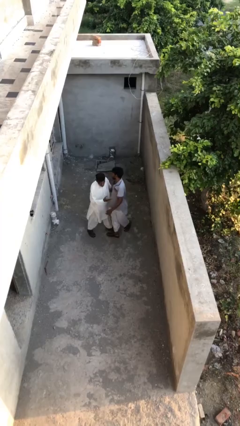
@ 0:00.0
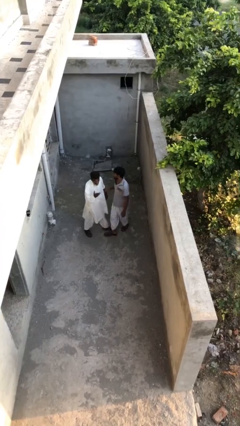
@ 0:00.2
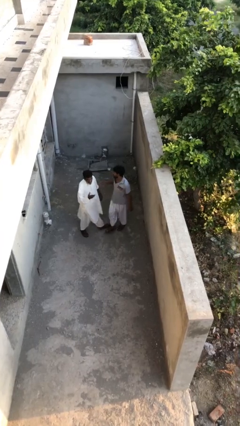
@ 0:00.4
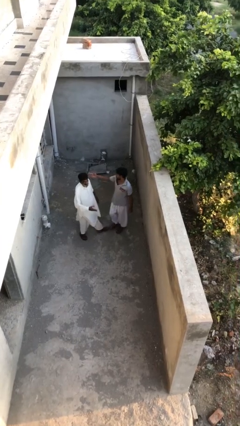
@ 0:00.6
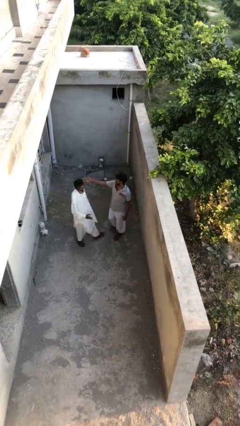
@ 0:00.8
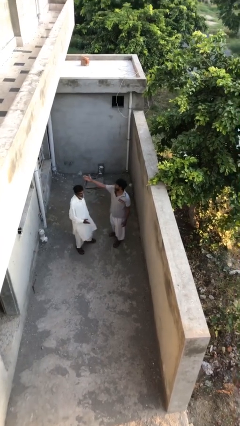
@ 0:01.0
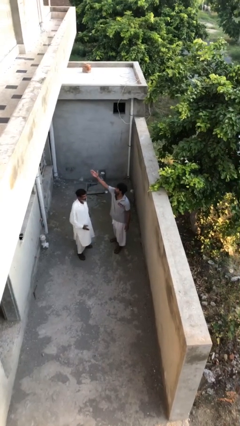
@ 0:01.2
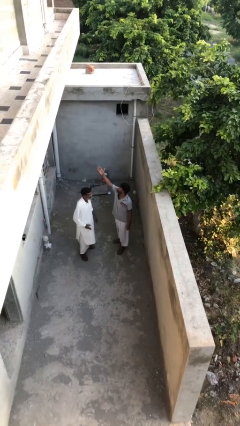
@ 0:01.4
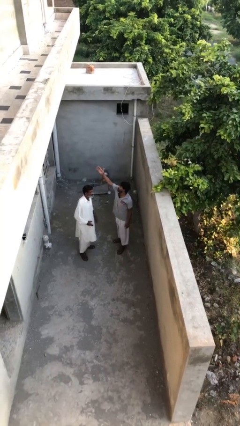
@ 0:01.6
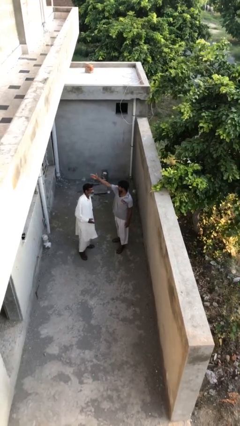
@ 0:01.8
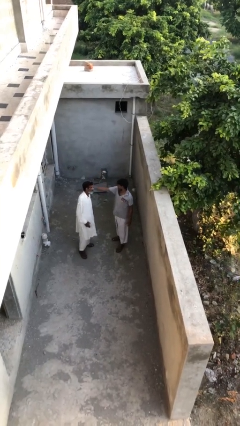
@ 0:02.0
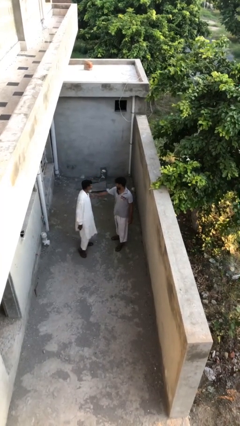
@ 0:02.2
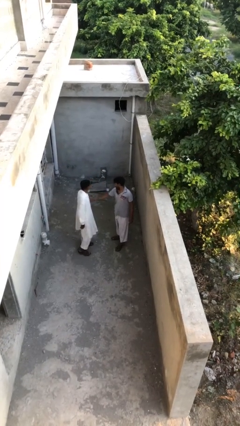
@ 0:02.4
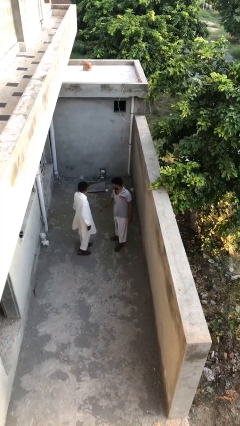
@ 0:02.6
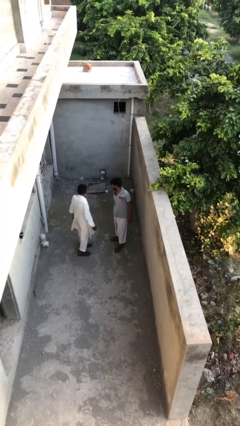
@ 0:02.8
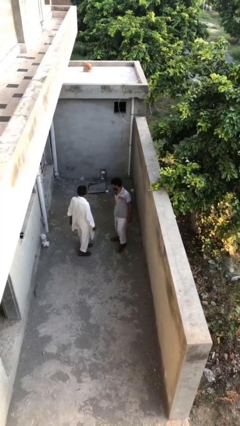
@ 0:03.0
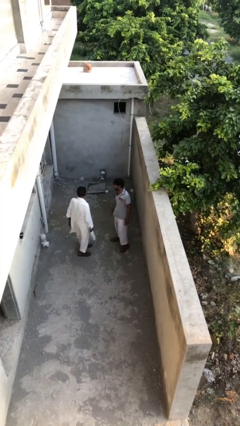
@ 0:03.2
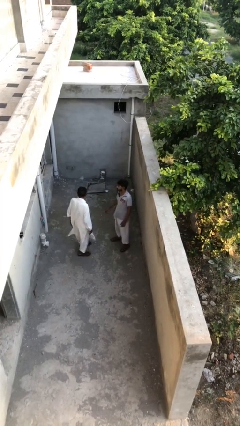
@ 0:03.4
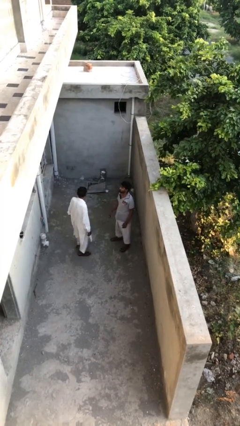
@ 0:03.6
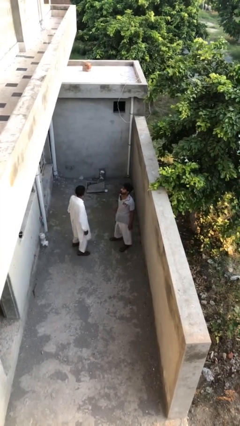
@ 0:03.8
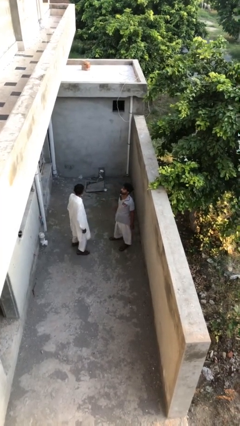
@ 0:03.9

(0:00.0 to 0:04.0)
person talks to person

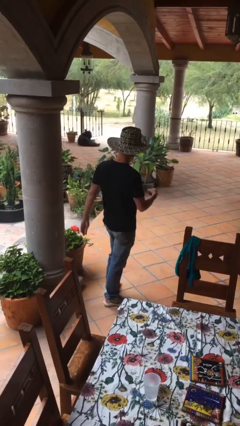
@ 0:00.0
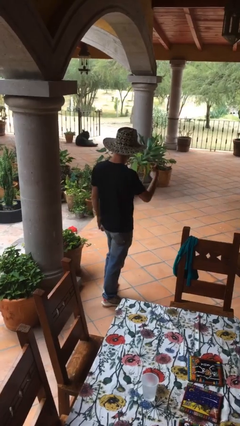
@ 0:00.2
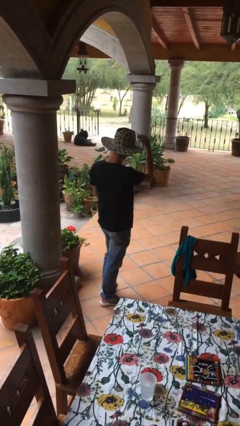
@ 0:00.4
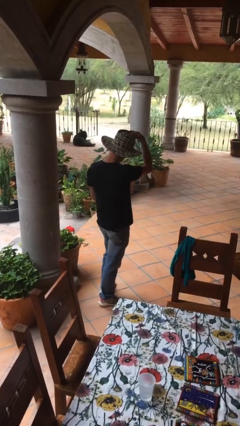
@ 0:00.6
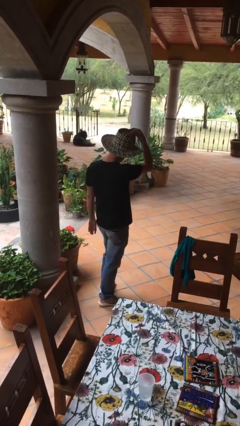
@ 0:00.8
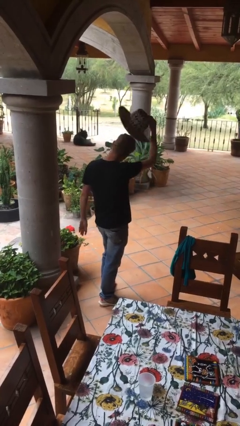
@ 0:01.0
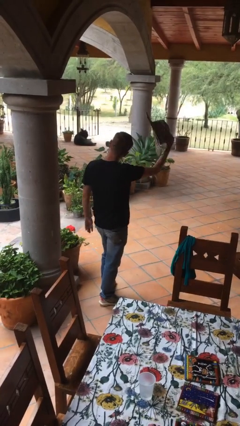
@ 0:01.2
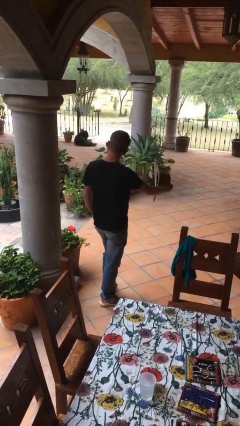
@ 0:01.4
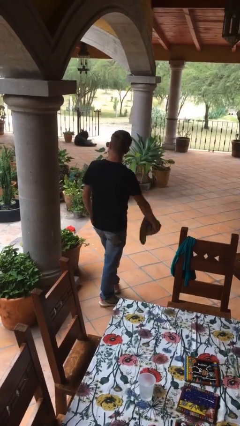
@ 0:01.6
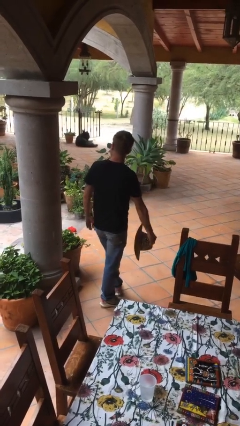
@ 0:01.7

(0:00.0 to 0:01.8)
person takes off hat

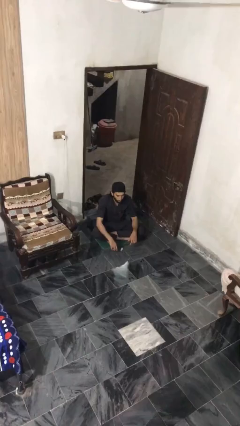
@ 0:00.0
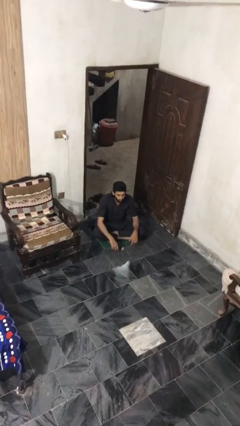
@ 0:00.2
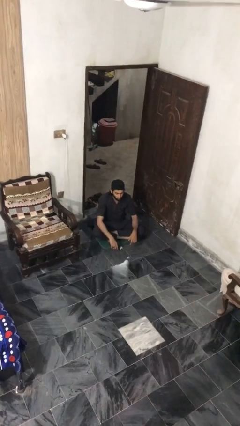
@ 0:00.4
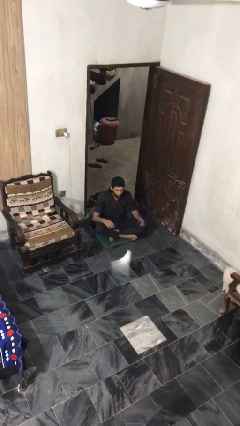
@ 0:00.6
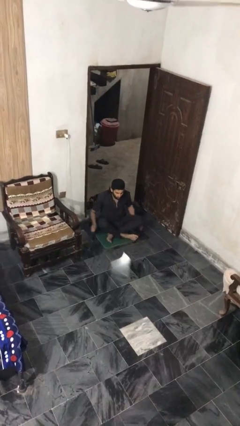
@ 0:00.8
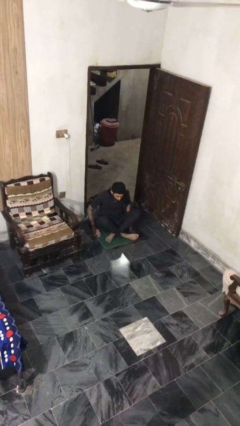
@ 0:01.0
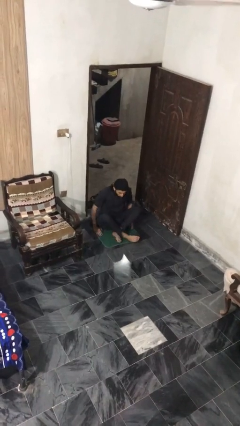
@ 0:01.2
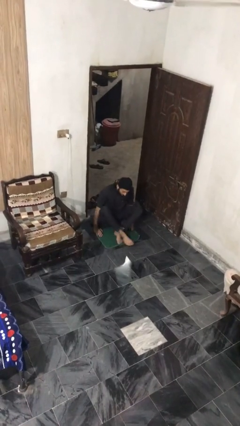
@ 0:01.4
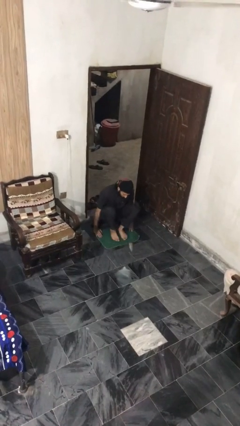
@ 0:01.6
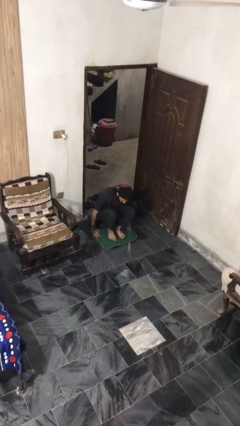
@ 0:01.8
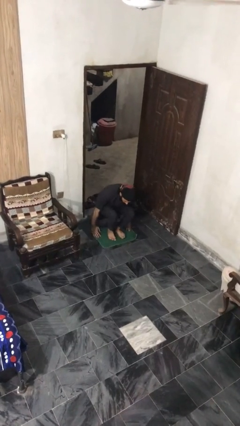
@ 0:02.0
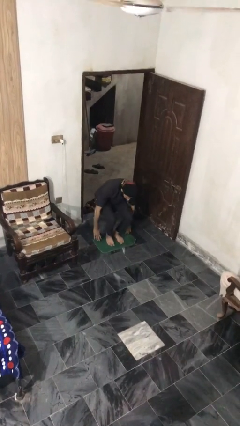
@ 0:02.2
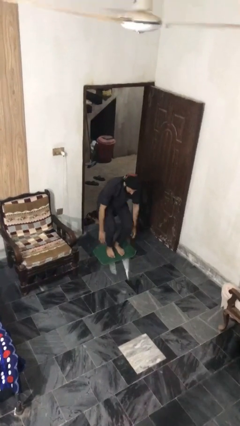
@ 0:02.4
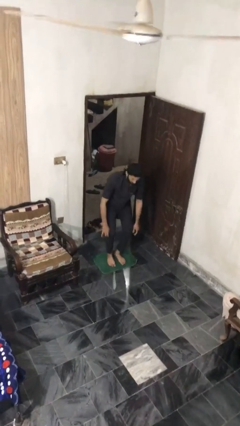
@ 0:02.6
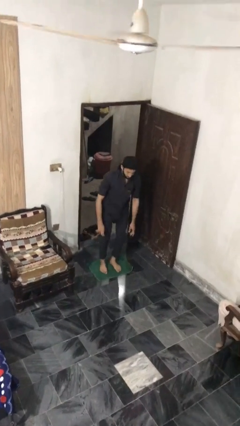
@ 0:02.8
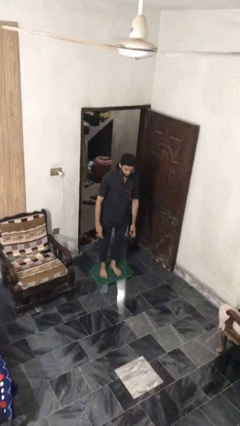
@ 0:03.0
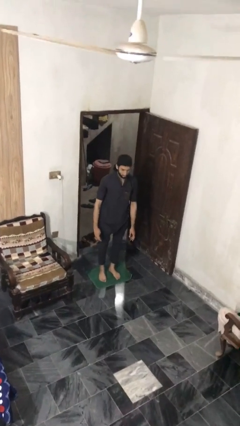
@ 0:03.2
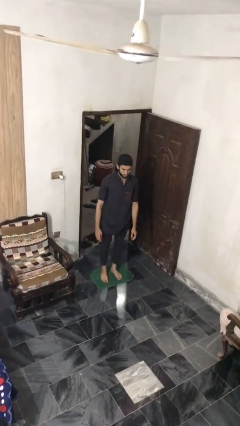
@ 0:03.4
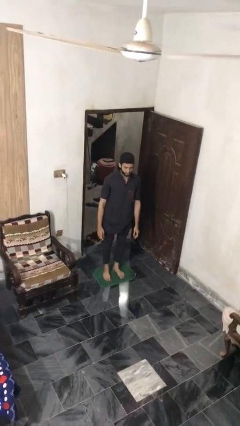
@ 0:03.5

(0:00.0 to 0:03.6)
person stands up from floor

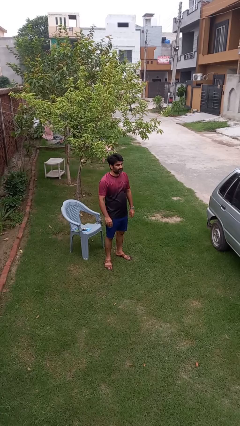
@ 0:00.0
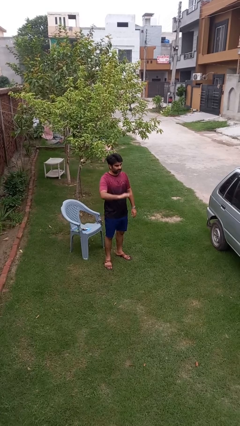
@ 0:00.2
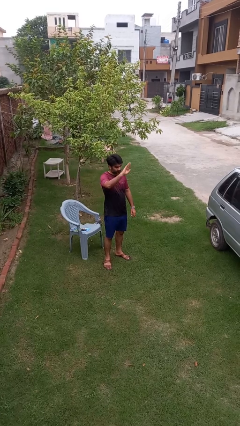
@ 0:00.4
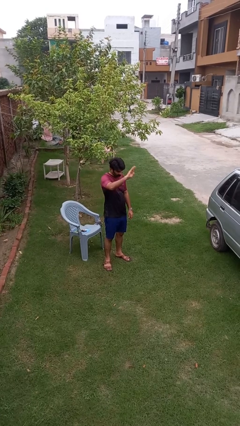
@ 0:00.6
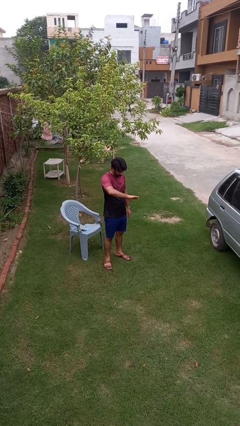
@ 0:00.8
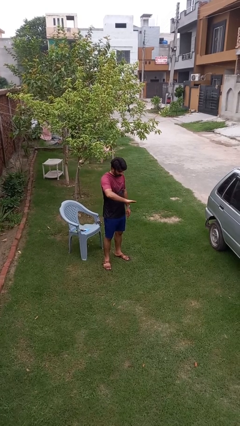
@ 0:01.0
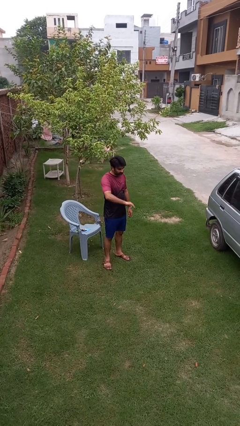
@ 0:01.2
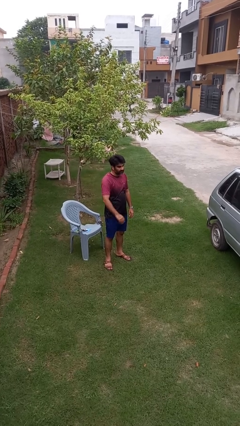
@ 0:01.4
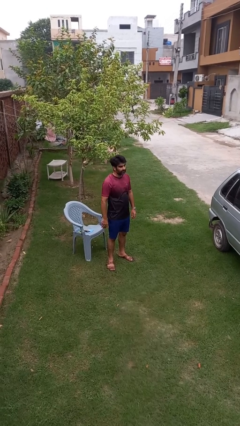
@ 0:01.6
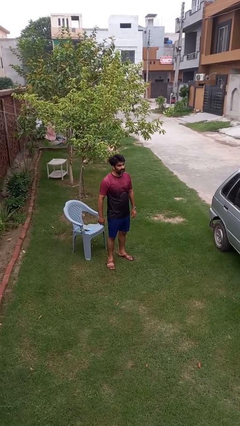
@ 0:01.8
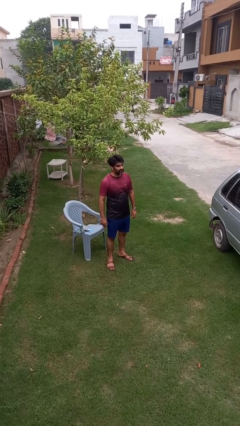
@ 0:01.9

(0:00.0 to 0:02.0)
person gestures swipe down

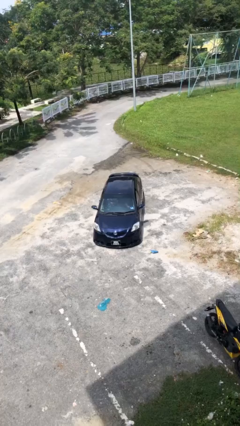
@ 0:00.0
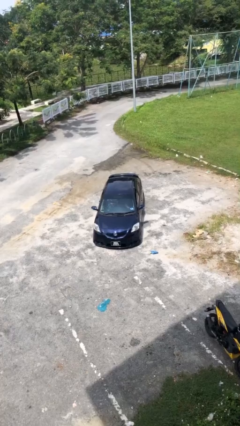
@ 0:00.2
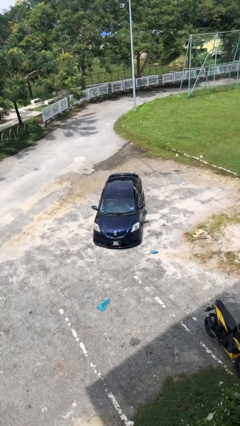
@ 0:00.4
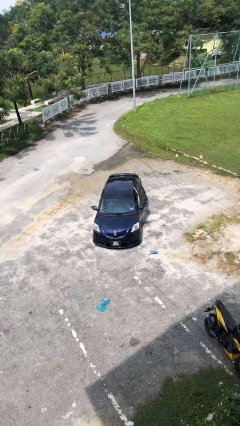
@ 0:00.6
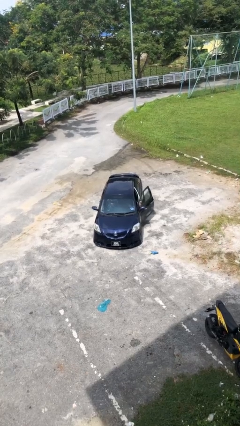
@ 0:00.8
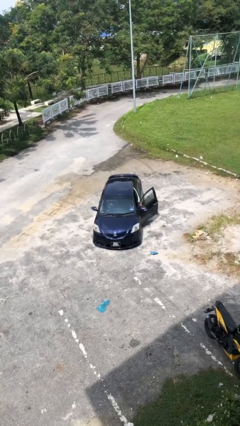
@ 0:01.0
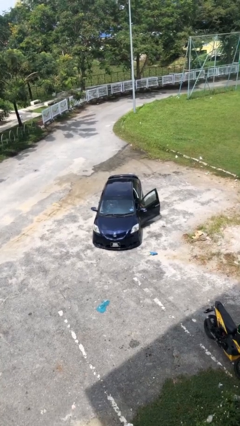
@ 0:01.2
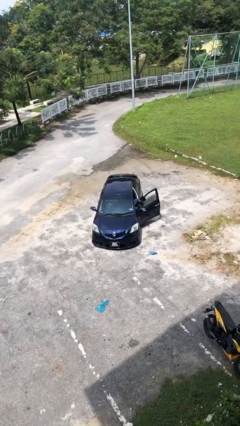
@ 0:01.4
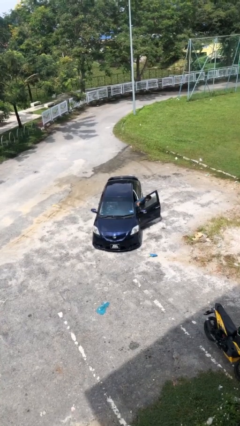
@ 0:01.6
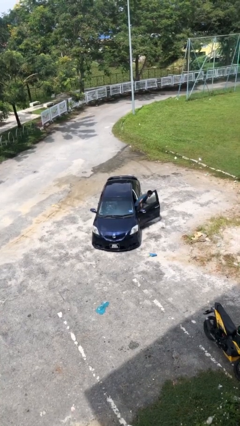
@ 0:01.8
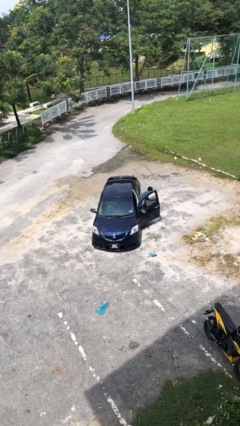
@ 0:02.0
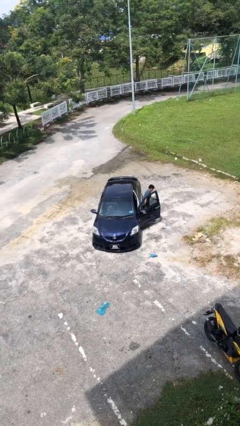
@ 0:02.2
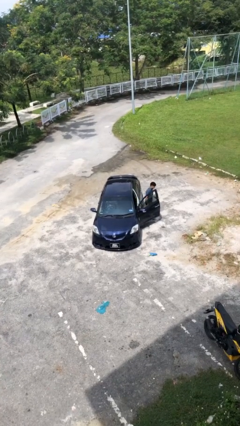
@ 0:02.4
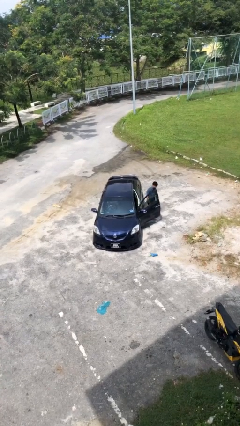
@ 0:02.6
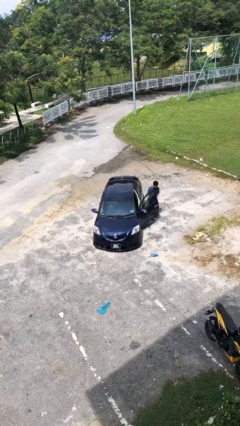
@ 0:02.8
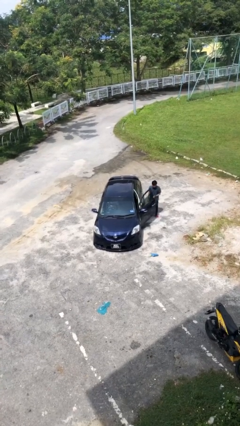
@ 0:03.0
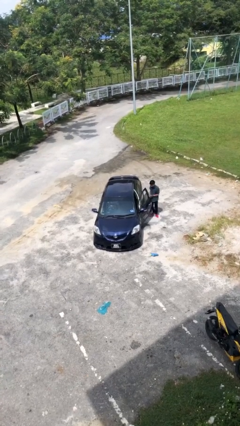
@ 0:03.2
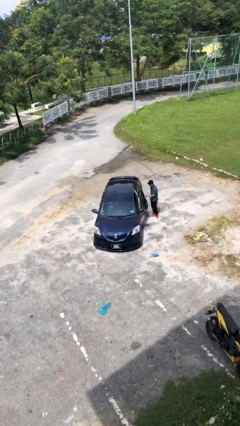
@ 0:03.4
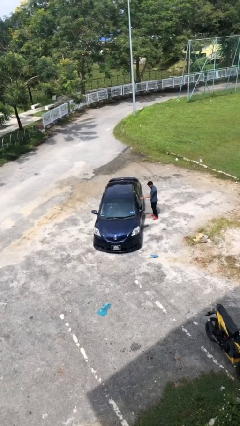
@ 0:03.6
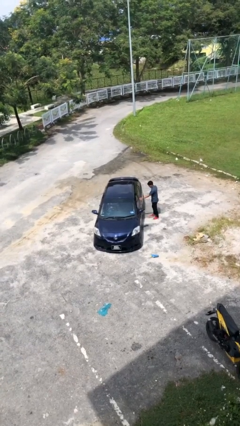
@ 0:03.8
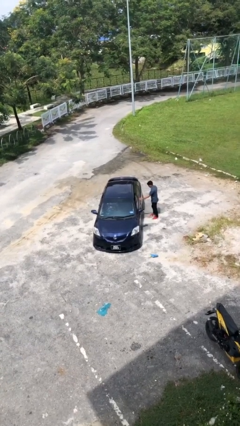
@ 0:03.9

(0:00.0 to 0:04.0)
car drops off person

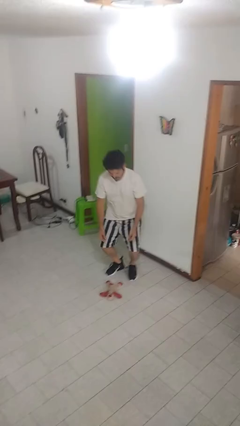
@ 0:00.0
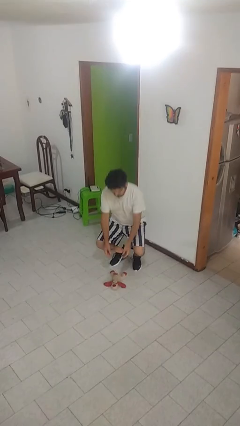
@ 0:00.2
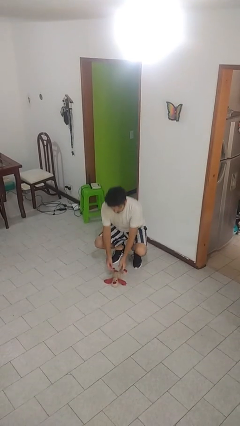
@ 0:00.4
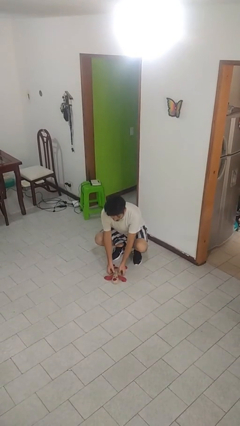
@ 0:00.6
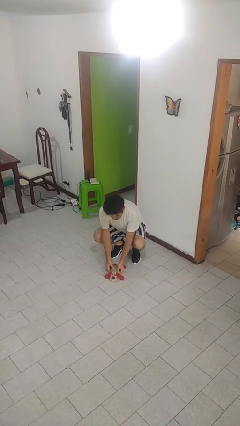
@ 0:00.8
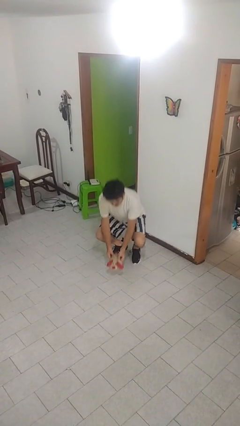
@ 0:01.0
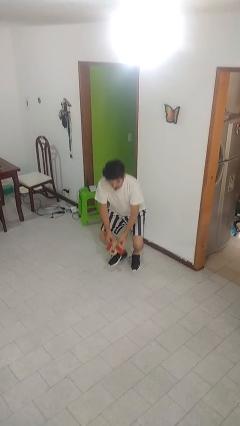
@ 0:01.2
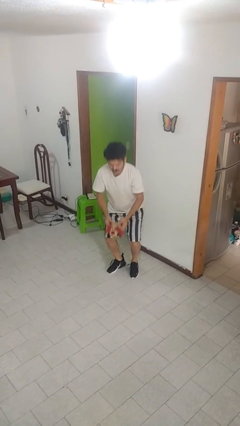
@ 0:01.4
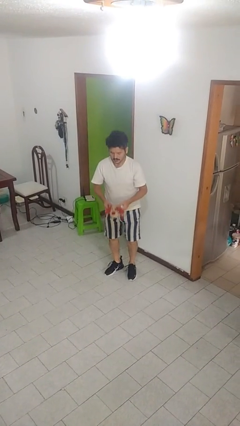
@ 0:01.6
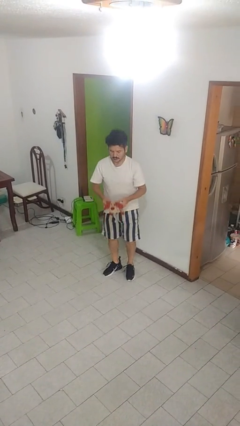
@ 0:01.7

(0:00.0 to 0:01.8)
person picks up object from floor

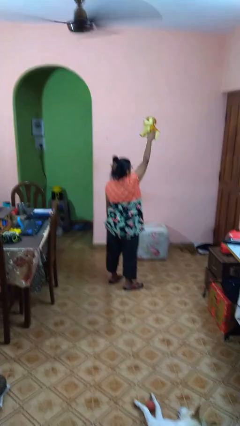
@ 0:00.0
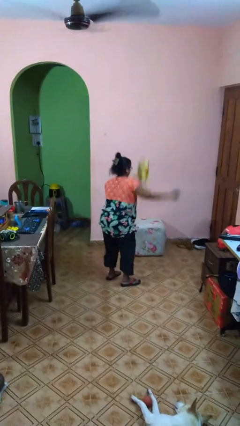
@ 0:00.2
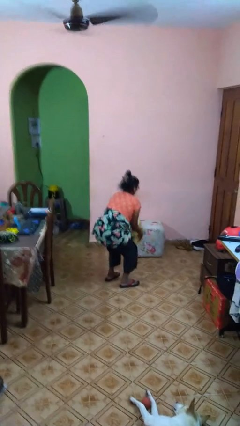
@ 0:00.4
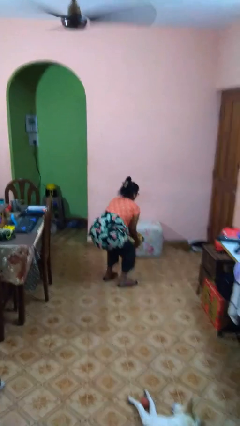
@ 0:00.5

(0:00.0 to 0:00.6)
person drops object
